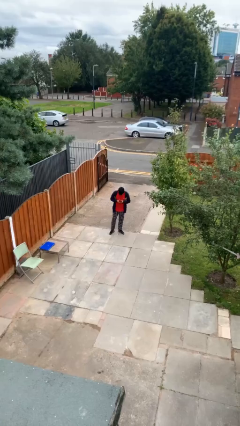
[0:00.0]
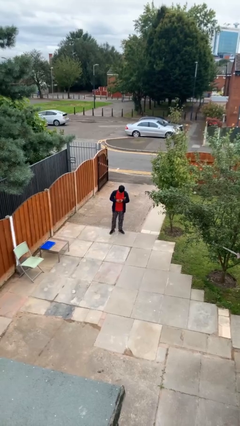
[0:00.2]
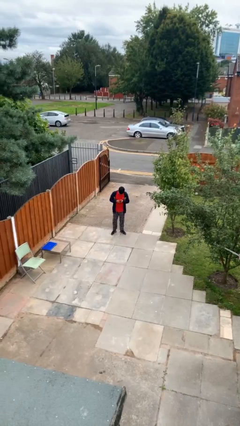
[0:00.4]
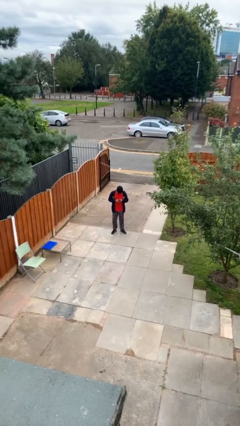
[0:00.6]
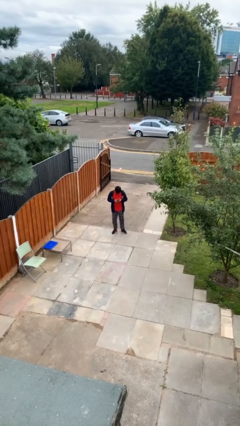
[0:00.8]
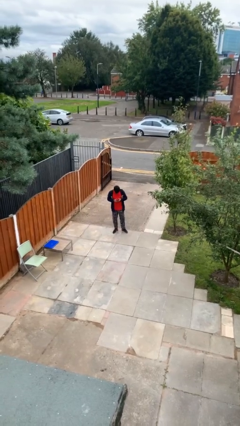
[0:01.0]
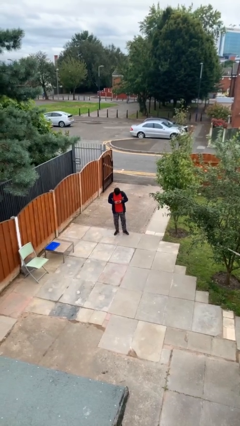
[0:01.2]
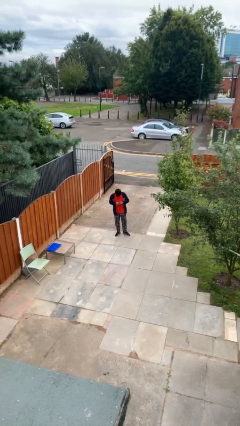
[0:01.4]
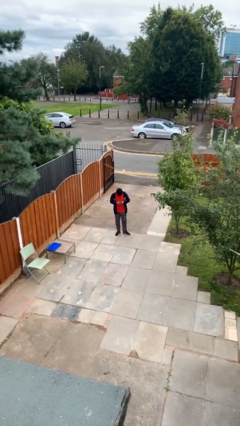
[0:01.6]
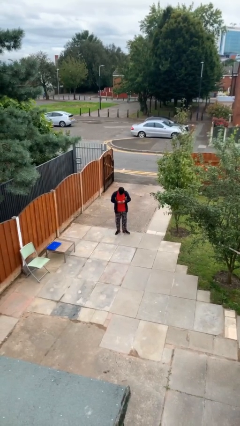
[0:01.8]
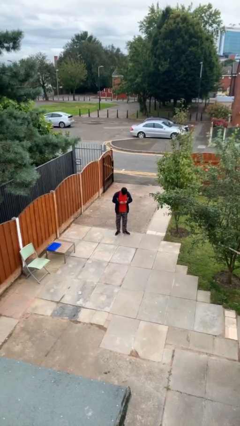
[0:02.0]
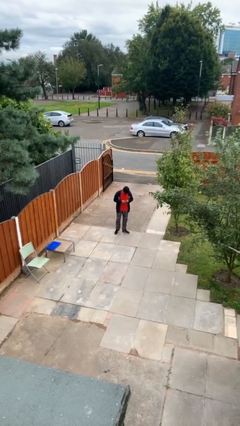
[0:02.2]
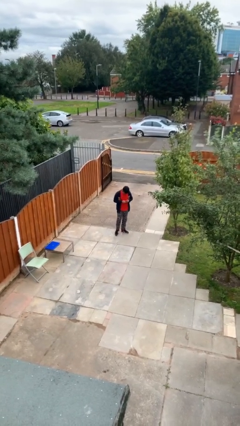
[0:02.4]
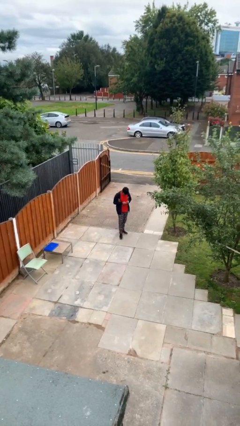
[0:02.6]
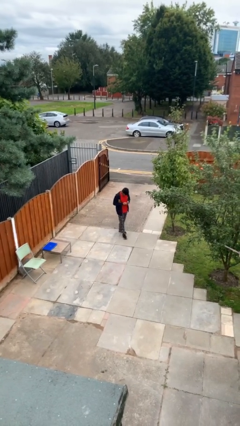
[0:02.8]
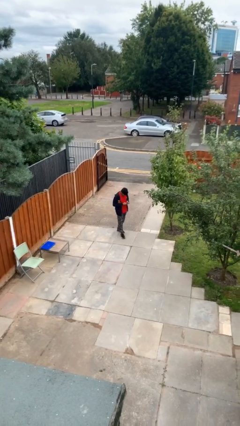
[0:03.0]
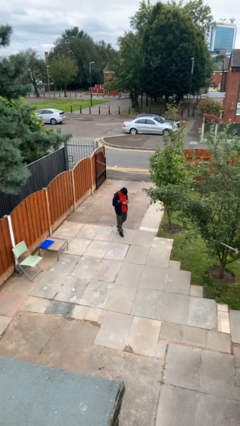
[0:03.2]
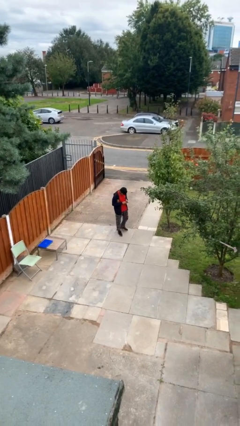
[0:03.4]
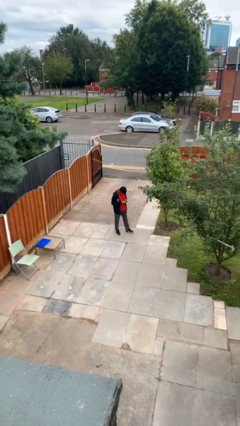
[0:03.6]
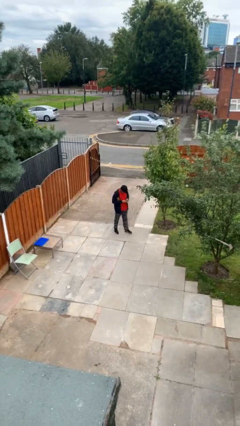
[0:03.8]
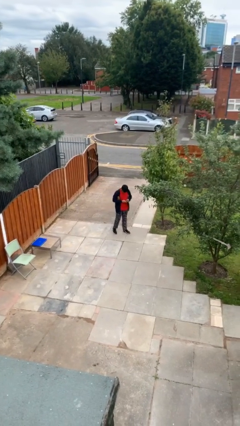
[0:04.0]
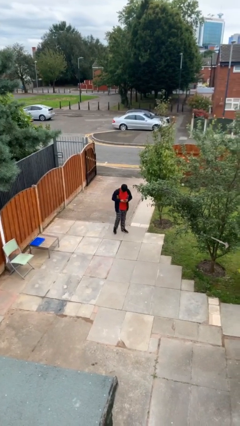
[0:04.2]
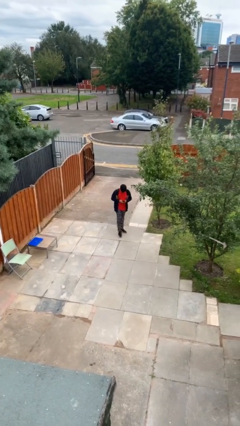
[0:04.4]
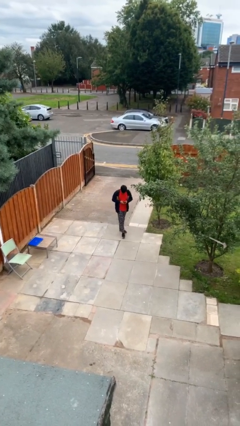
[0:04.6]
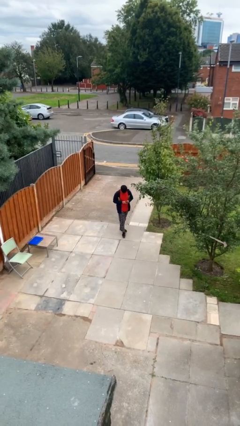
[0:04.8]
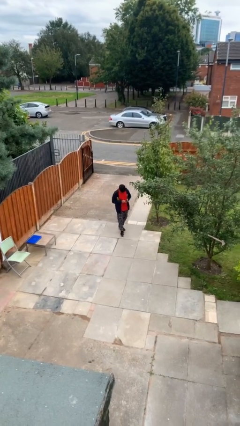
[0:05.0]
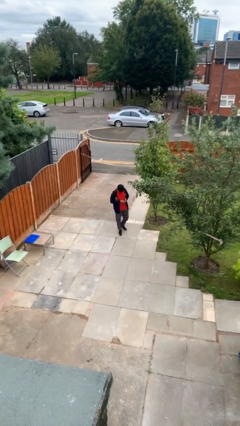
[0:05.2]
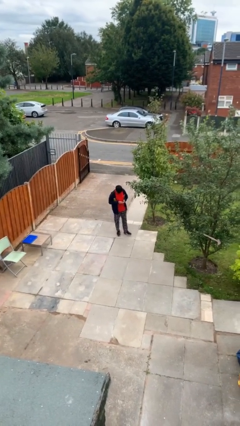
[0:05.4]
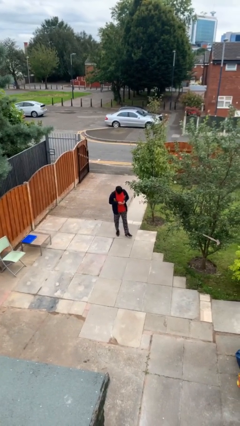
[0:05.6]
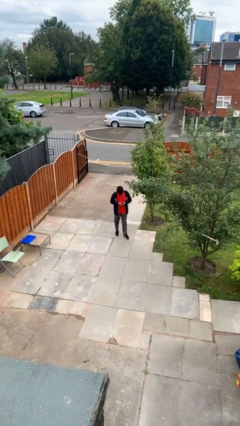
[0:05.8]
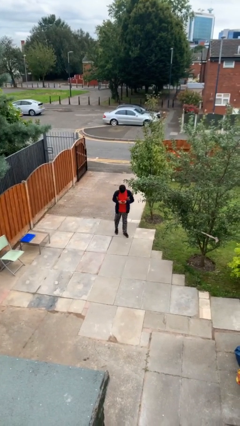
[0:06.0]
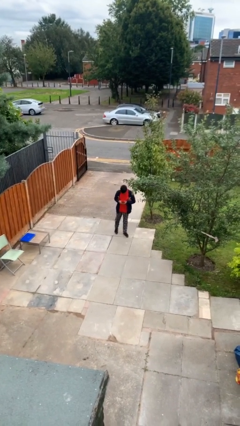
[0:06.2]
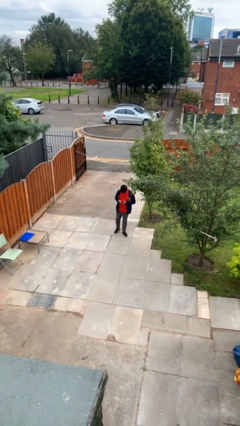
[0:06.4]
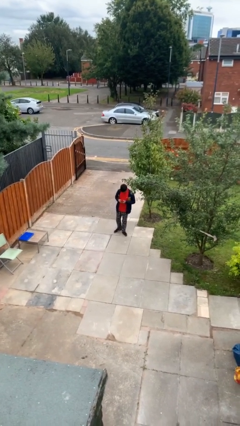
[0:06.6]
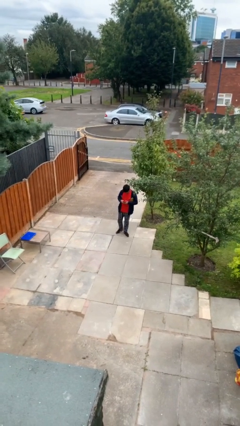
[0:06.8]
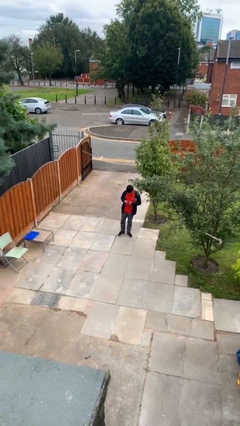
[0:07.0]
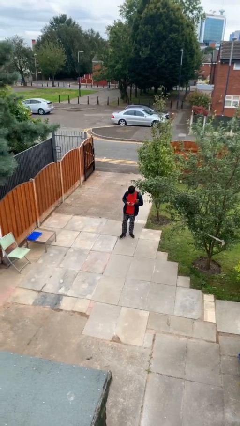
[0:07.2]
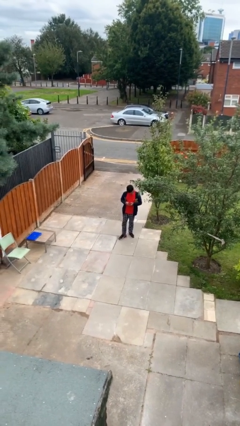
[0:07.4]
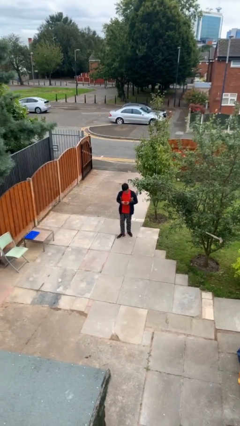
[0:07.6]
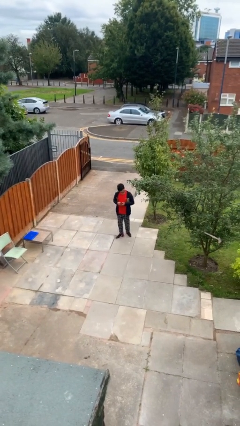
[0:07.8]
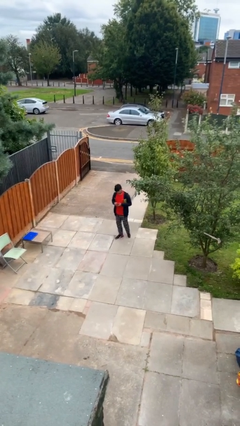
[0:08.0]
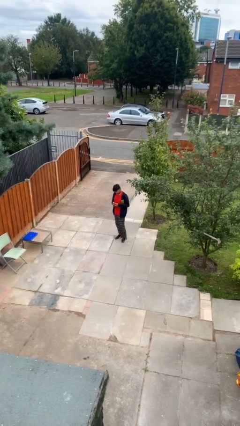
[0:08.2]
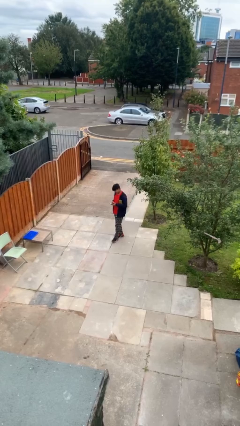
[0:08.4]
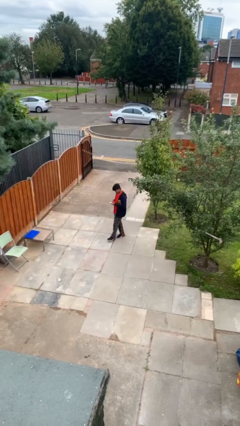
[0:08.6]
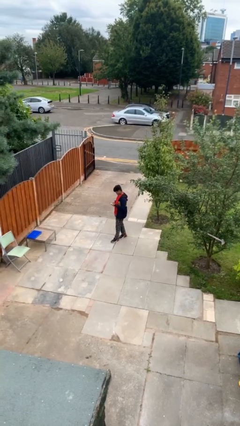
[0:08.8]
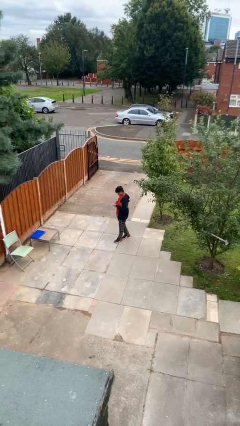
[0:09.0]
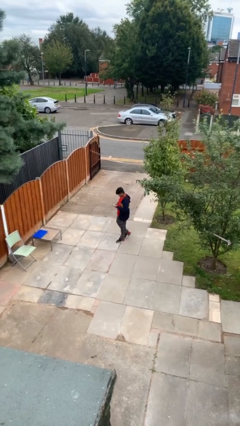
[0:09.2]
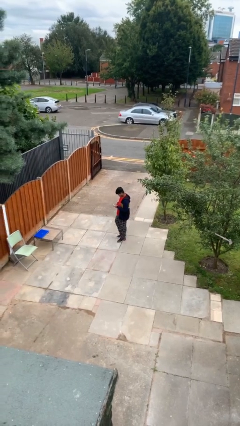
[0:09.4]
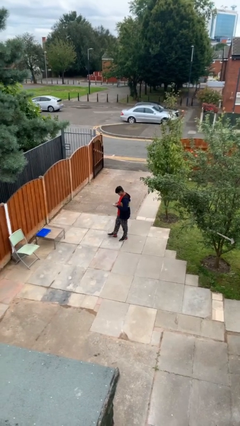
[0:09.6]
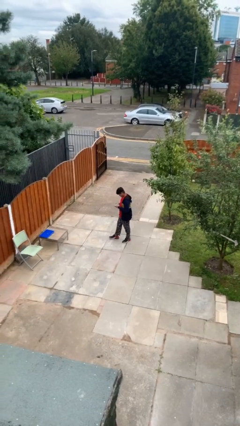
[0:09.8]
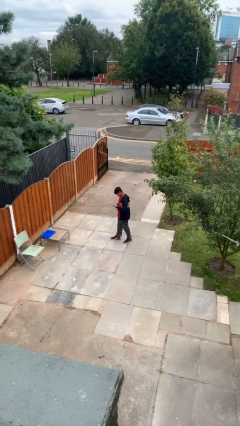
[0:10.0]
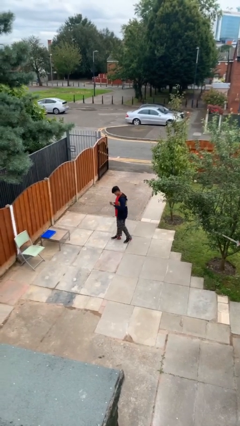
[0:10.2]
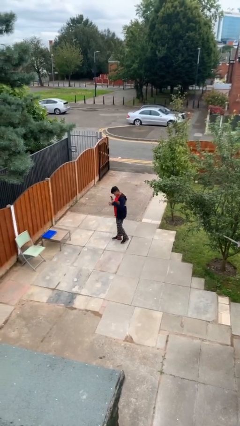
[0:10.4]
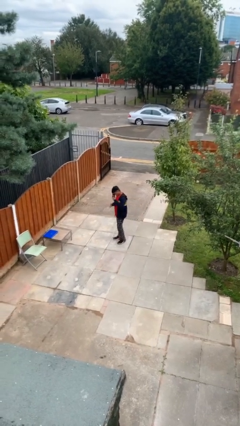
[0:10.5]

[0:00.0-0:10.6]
person texts on phone

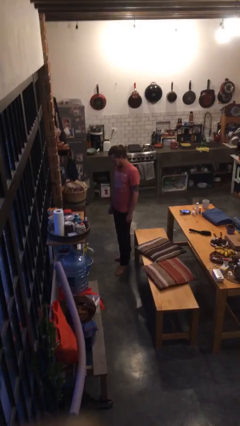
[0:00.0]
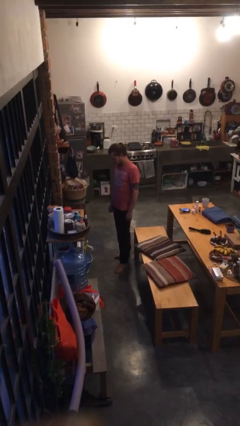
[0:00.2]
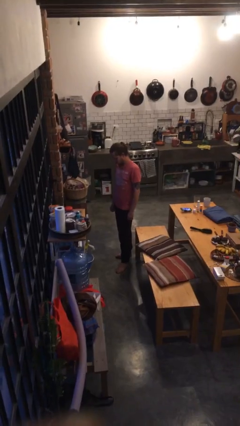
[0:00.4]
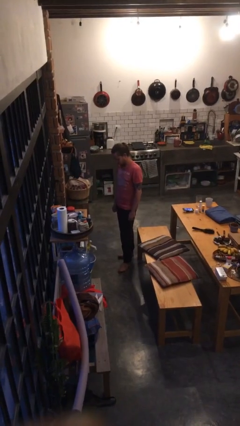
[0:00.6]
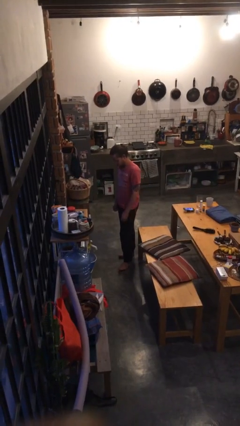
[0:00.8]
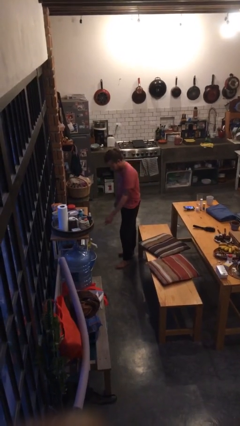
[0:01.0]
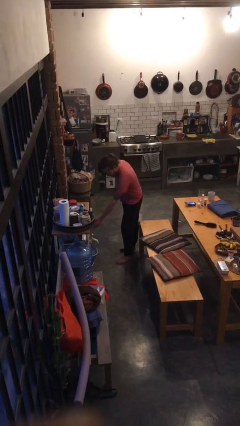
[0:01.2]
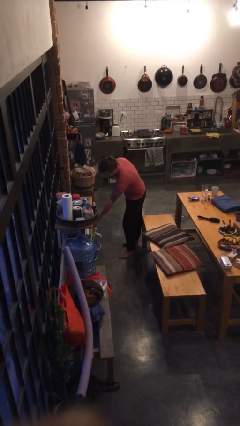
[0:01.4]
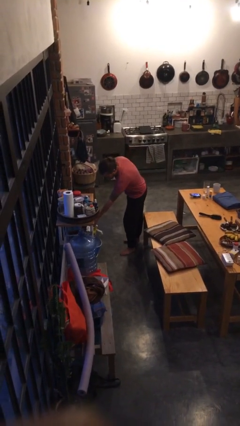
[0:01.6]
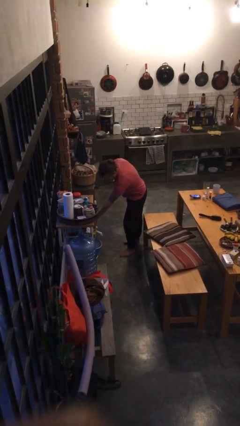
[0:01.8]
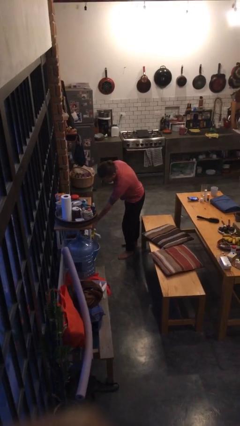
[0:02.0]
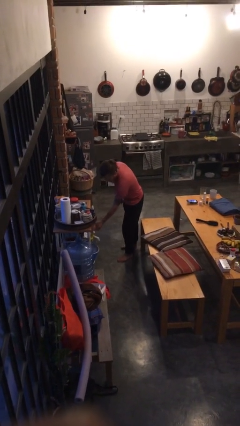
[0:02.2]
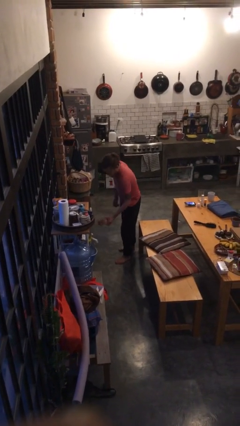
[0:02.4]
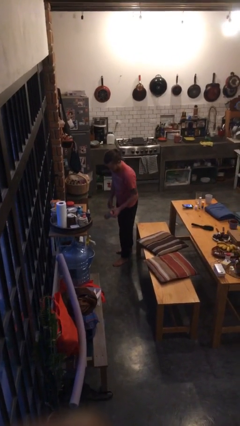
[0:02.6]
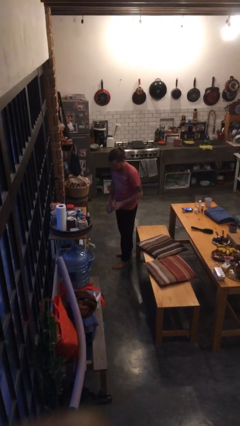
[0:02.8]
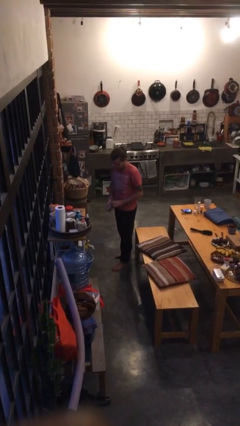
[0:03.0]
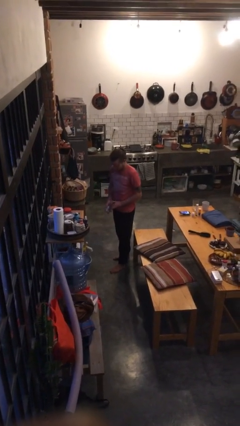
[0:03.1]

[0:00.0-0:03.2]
person picks up object from cabinet

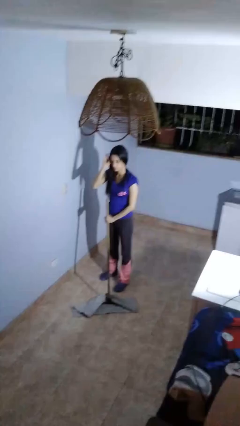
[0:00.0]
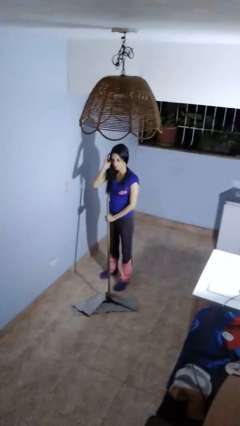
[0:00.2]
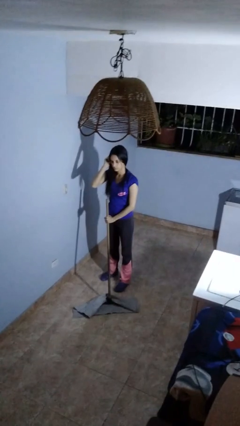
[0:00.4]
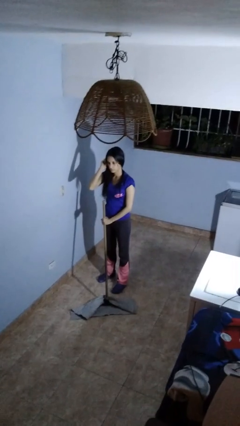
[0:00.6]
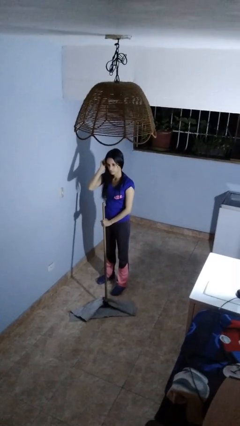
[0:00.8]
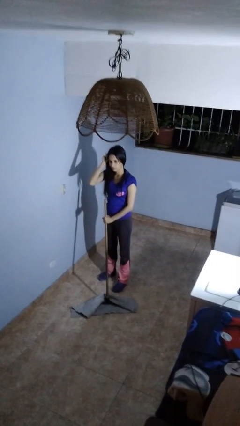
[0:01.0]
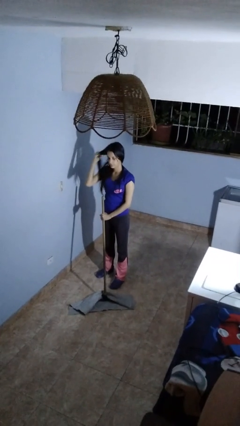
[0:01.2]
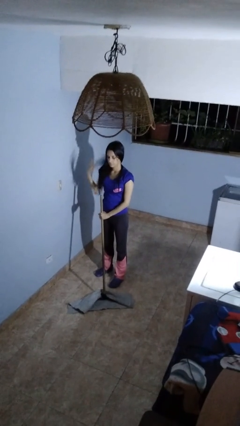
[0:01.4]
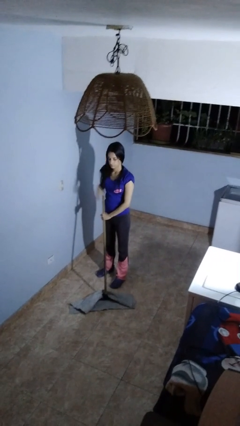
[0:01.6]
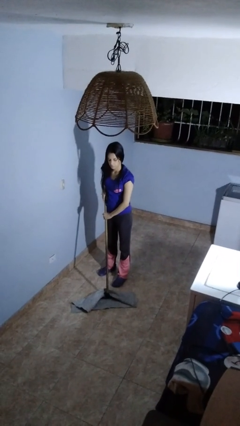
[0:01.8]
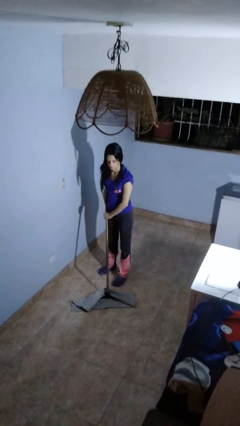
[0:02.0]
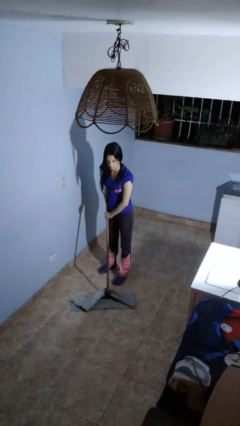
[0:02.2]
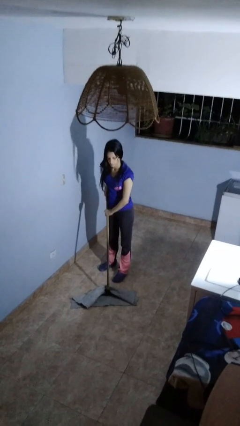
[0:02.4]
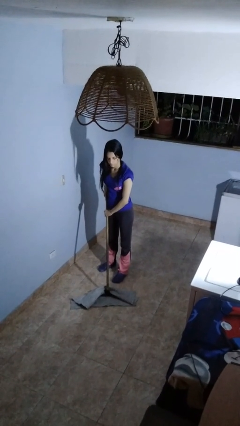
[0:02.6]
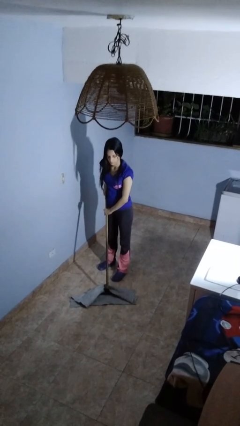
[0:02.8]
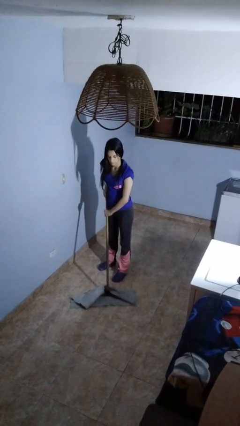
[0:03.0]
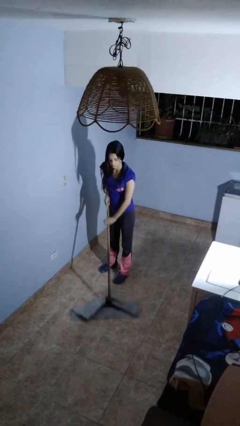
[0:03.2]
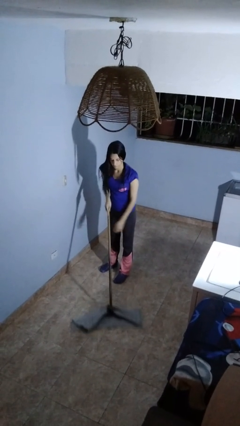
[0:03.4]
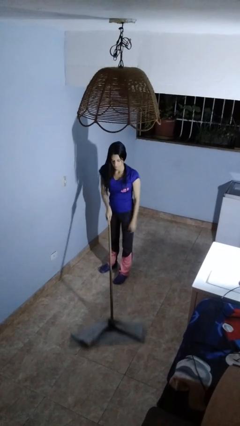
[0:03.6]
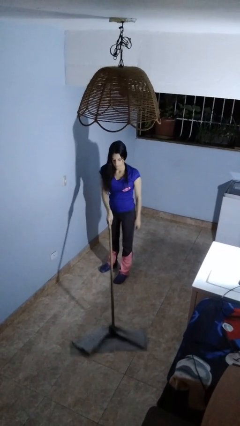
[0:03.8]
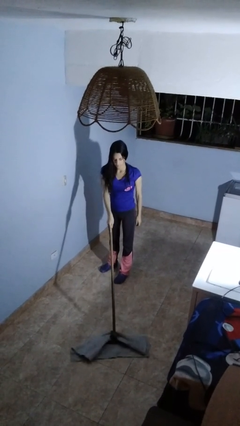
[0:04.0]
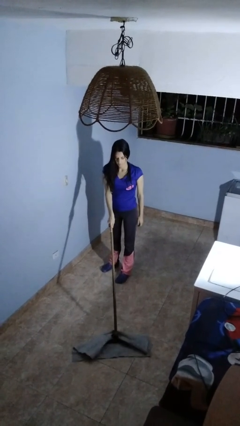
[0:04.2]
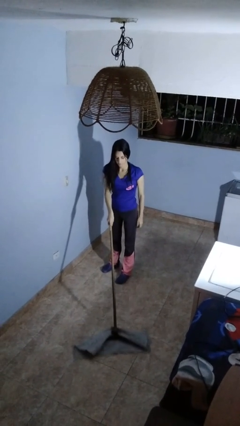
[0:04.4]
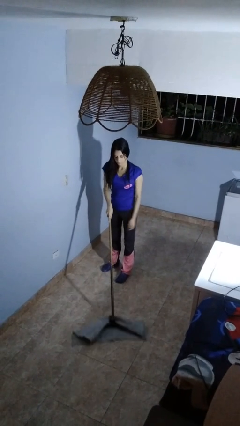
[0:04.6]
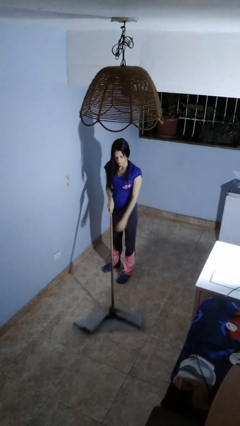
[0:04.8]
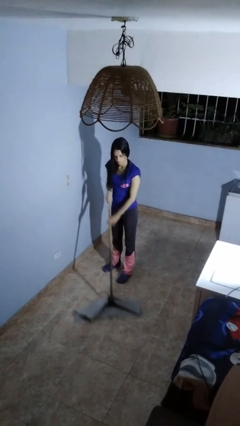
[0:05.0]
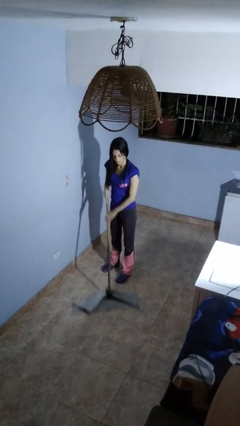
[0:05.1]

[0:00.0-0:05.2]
person mops
